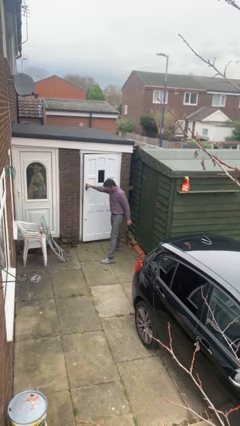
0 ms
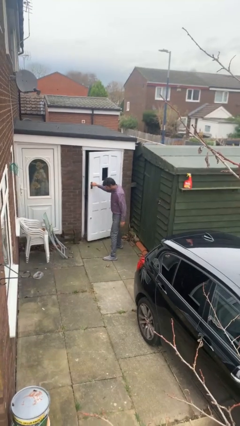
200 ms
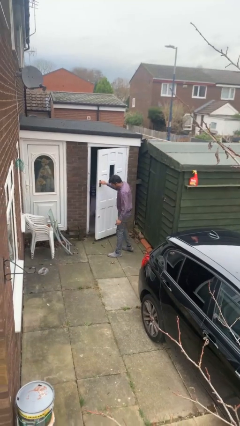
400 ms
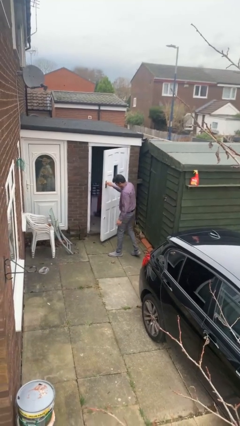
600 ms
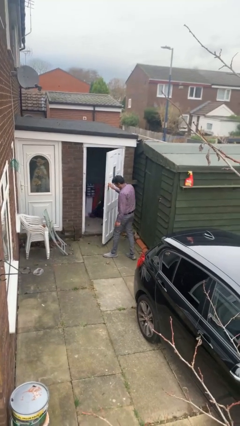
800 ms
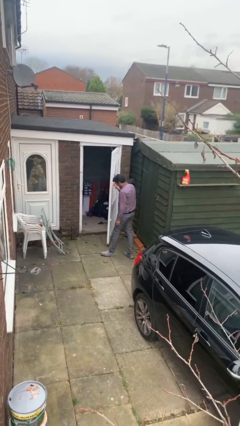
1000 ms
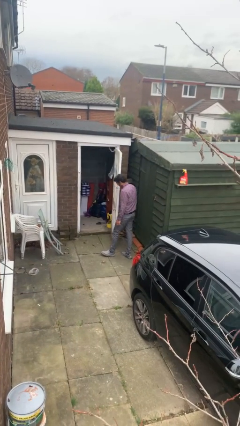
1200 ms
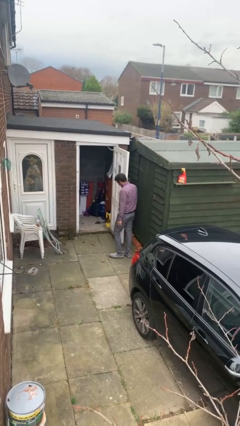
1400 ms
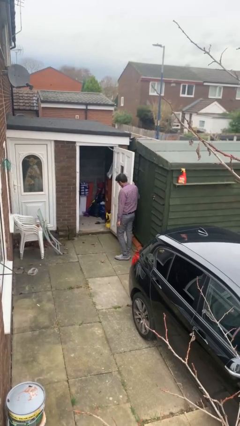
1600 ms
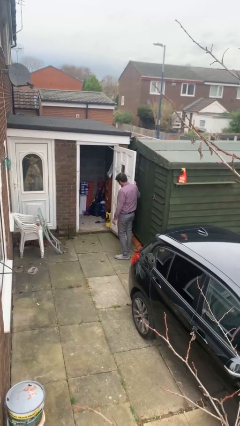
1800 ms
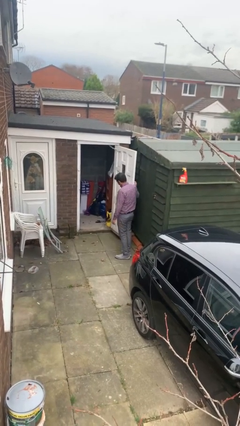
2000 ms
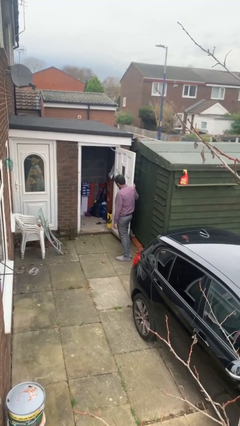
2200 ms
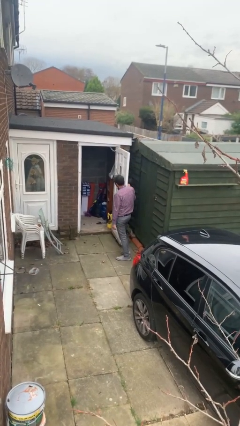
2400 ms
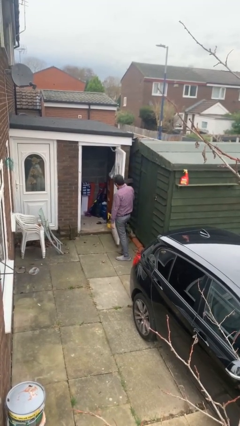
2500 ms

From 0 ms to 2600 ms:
person opens facility door

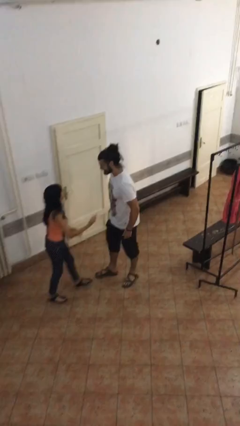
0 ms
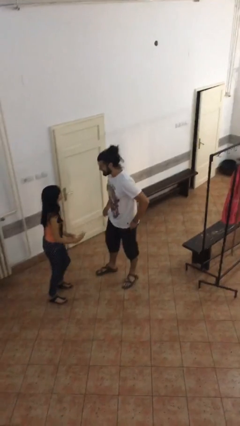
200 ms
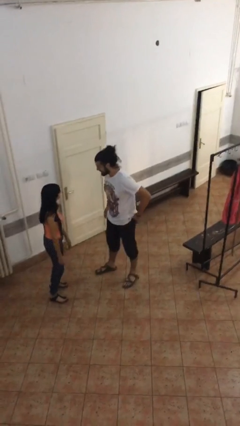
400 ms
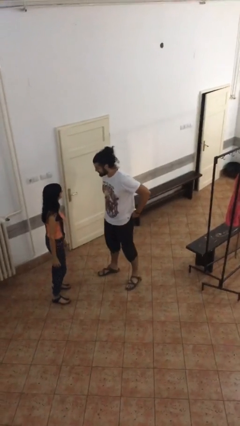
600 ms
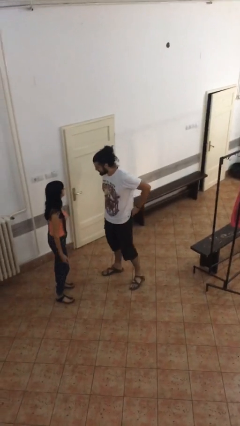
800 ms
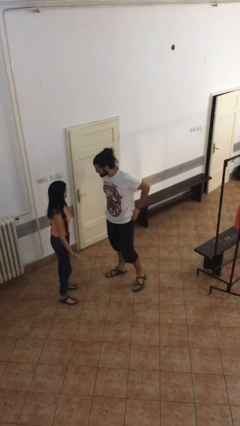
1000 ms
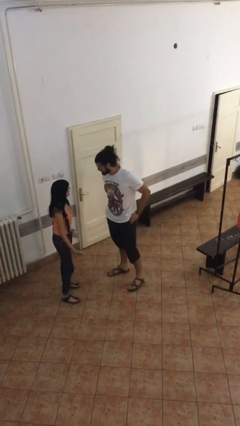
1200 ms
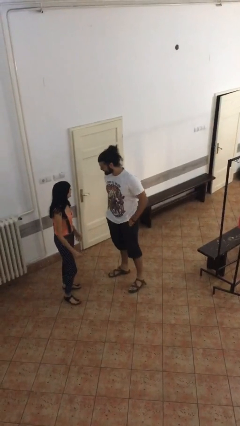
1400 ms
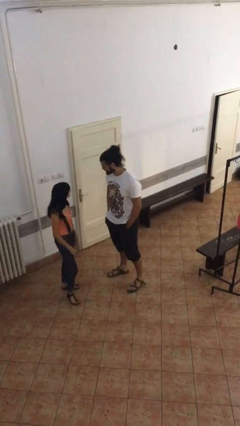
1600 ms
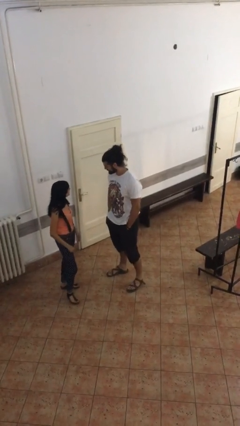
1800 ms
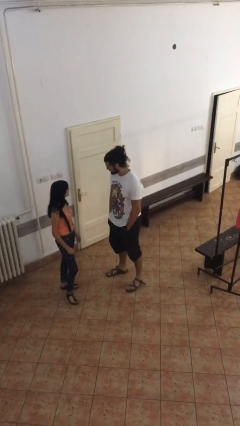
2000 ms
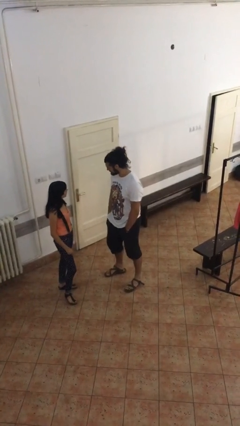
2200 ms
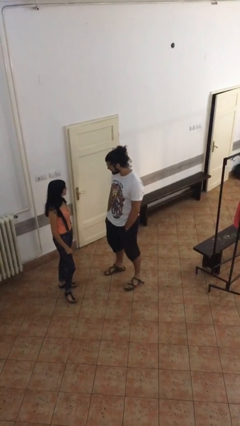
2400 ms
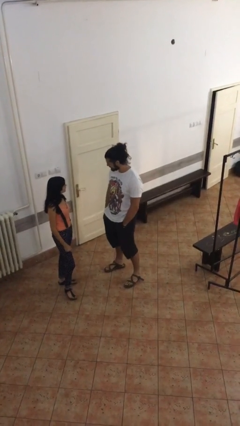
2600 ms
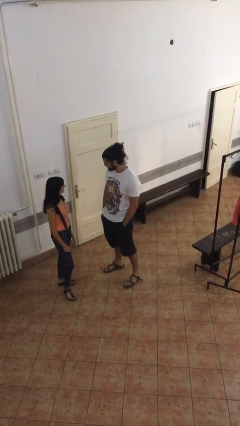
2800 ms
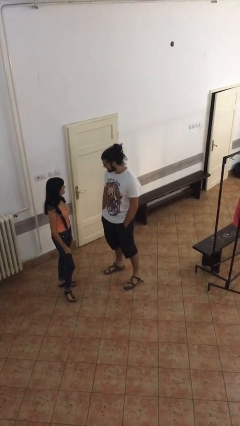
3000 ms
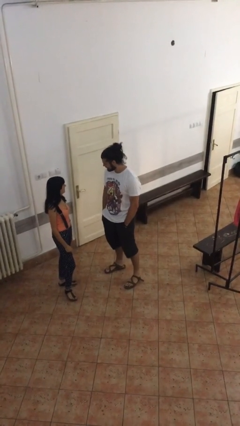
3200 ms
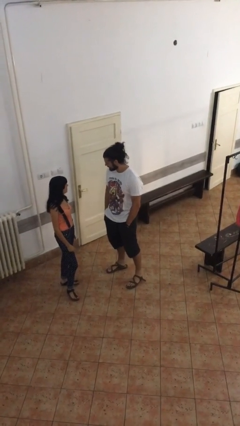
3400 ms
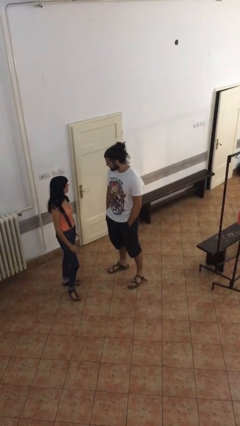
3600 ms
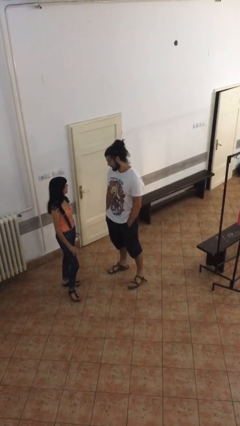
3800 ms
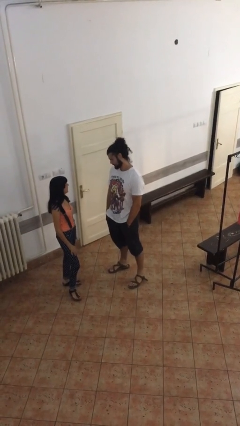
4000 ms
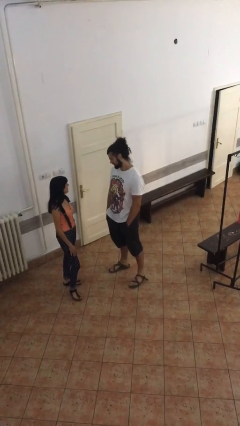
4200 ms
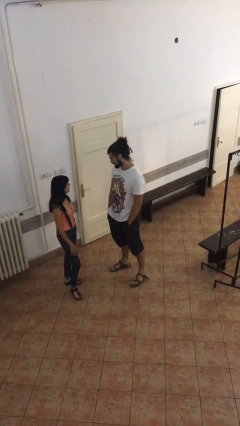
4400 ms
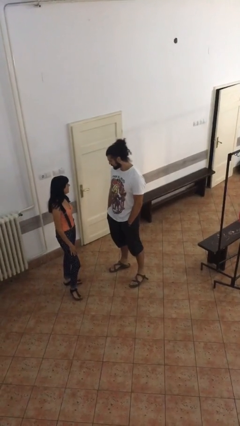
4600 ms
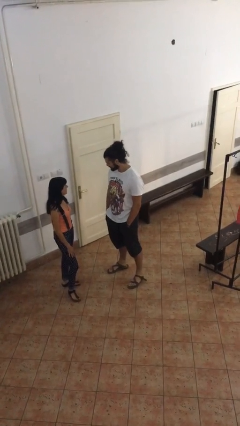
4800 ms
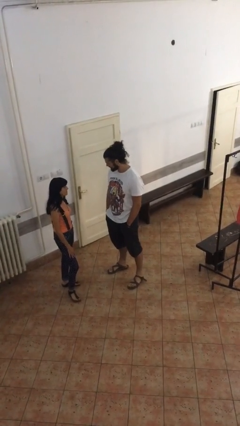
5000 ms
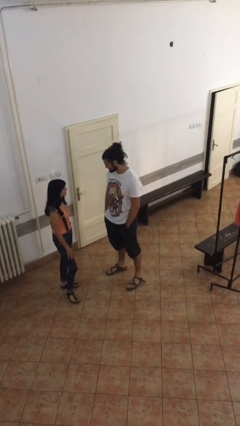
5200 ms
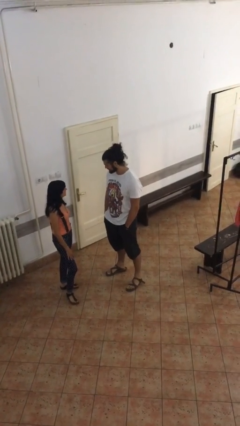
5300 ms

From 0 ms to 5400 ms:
person talks to person

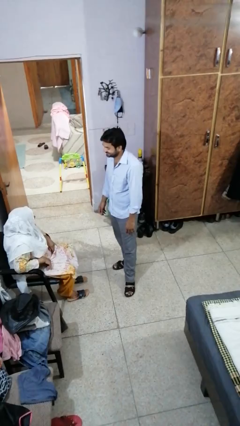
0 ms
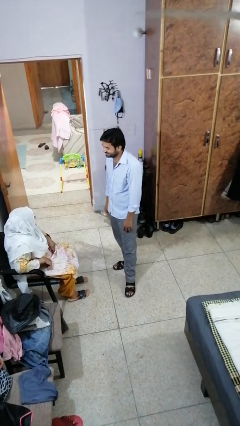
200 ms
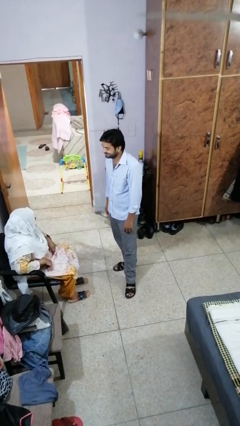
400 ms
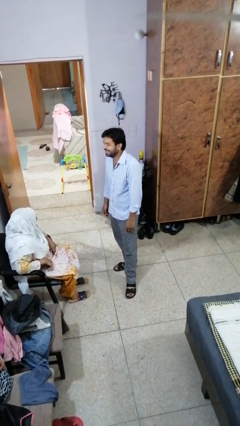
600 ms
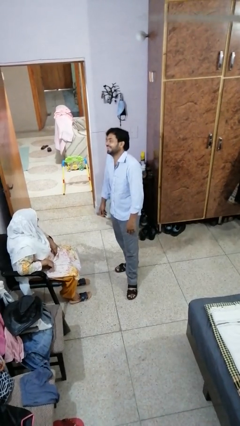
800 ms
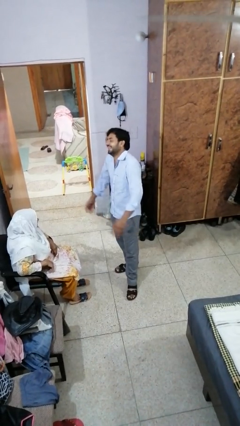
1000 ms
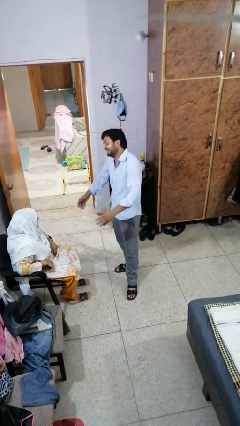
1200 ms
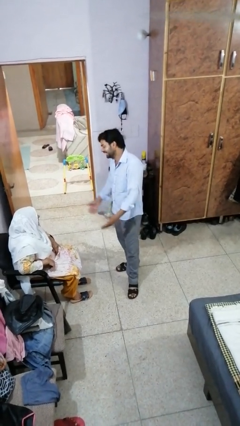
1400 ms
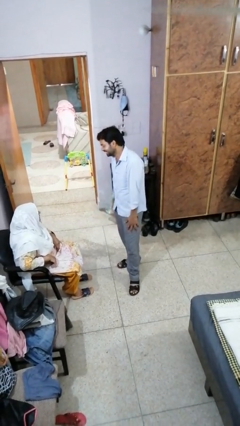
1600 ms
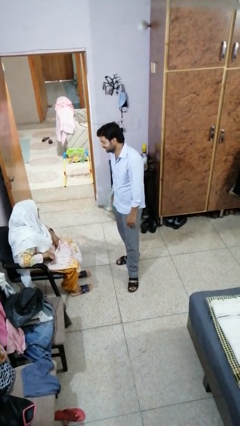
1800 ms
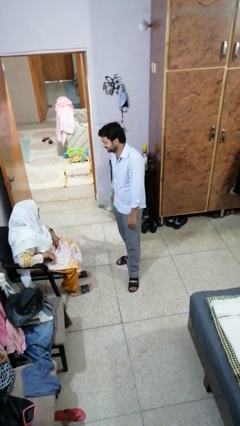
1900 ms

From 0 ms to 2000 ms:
person laughs with person

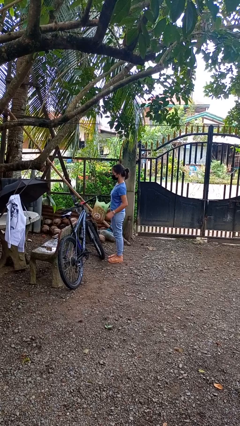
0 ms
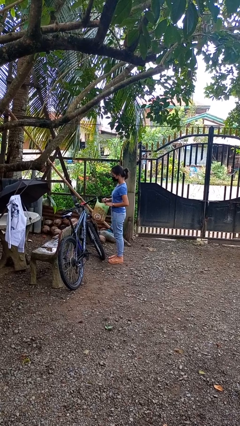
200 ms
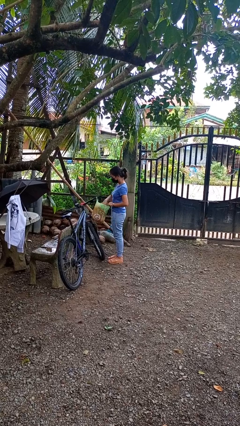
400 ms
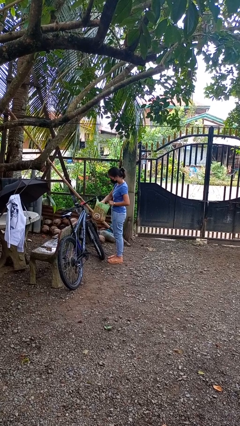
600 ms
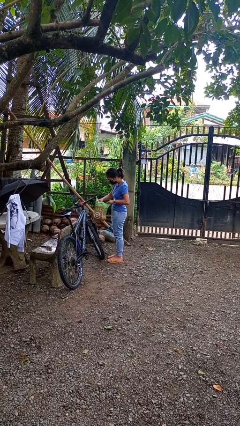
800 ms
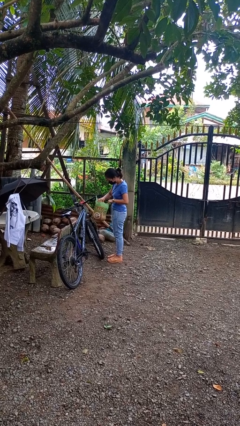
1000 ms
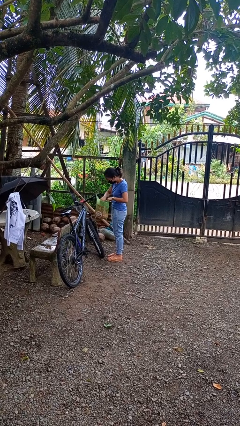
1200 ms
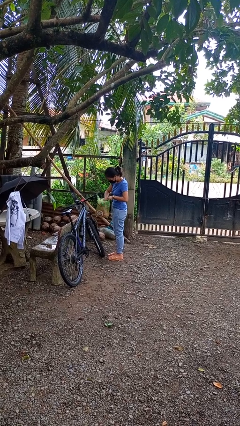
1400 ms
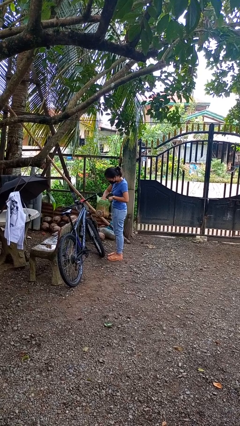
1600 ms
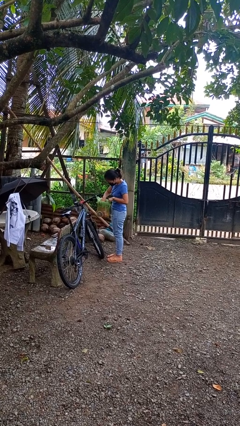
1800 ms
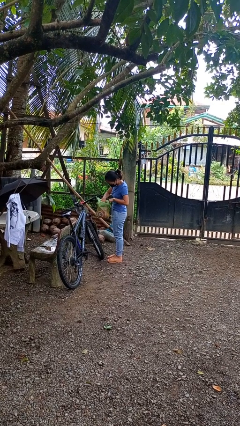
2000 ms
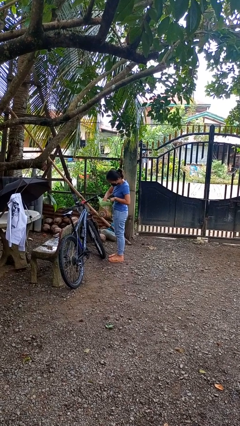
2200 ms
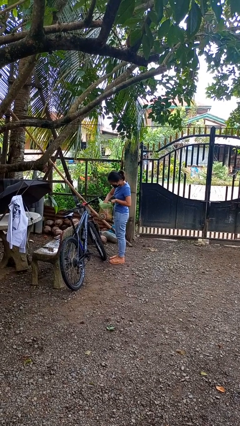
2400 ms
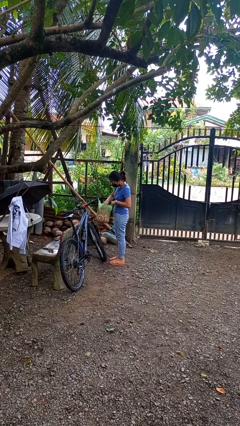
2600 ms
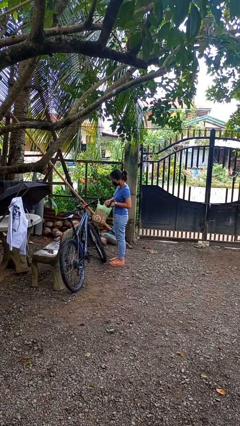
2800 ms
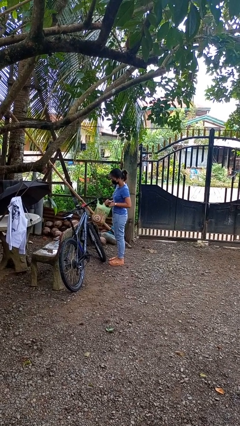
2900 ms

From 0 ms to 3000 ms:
person searches in bag

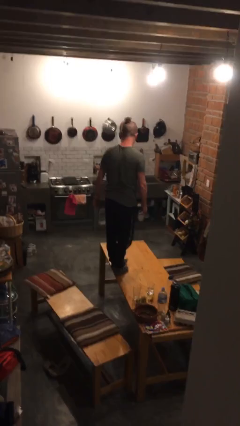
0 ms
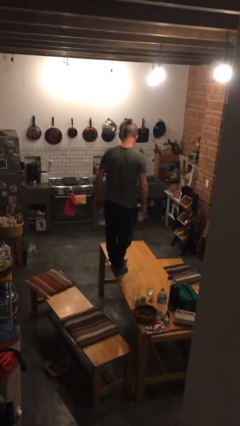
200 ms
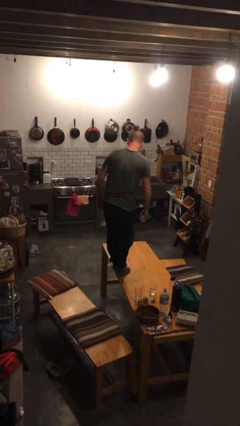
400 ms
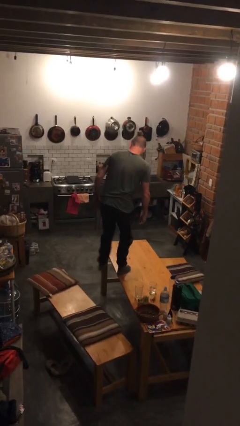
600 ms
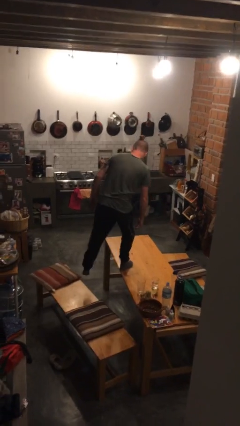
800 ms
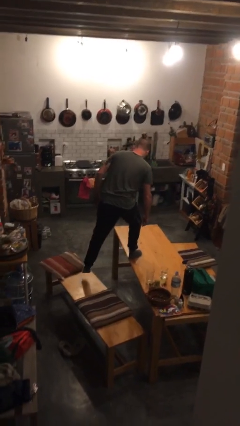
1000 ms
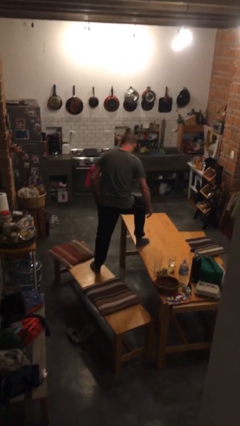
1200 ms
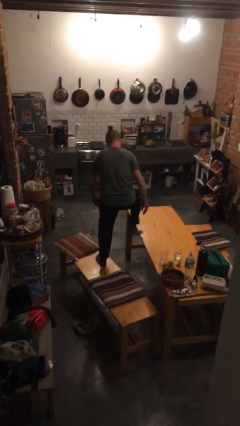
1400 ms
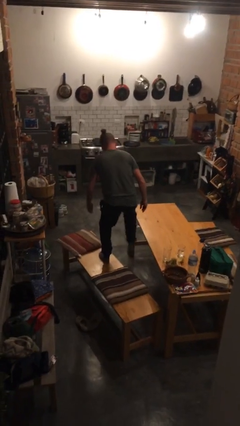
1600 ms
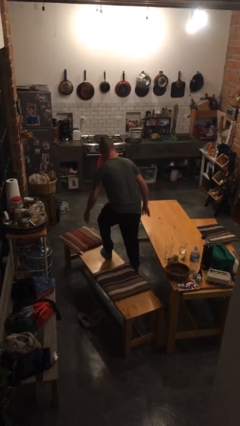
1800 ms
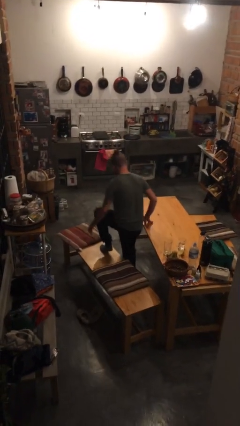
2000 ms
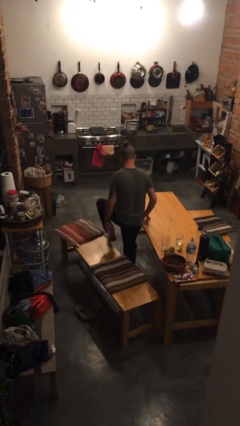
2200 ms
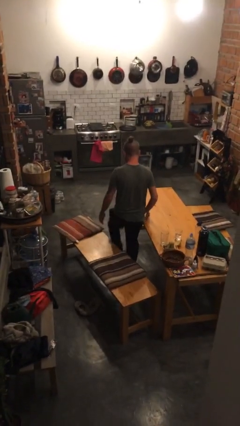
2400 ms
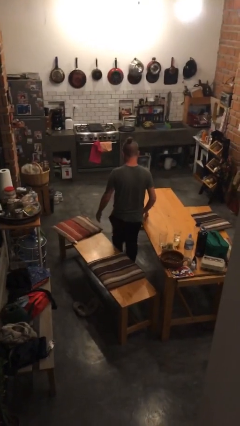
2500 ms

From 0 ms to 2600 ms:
person climbs off table

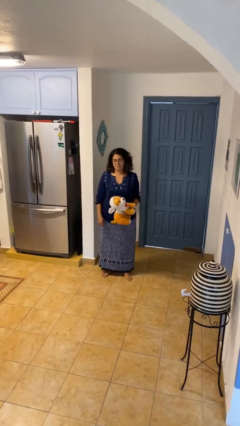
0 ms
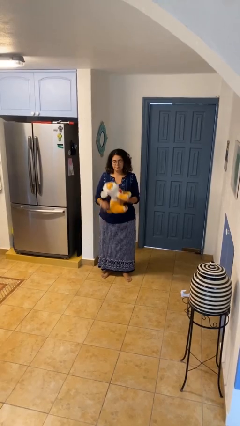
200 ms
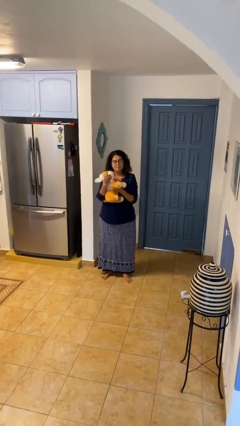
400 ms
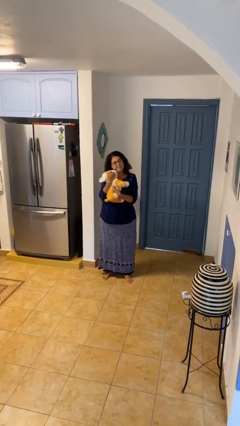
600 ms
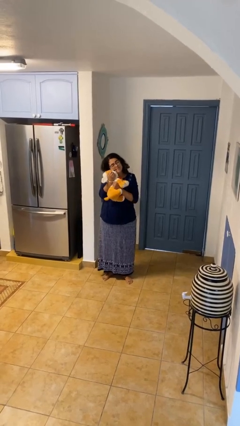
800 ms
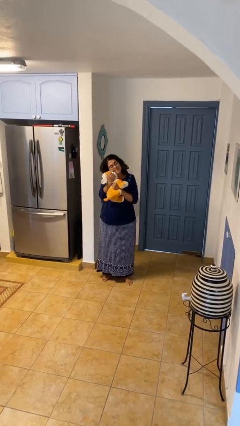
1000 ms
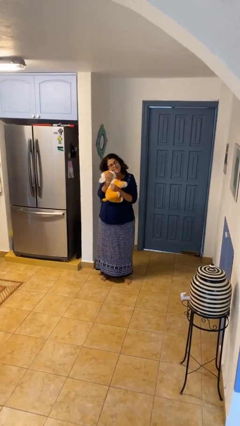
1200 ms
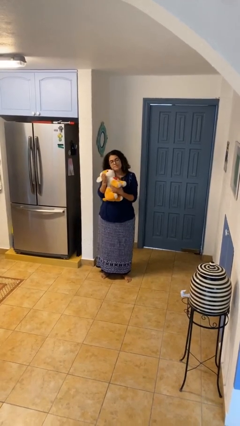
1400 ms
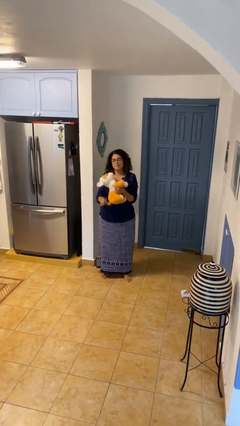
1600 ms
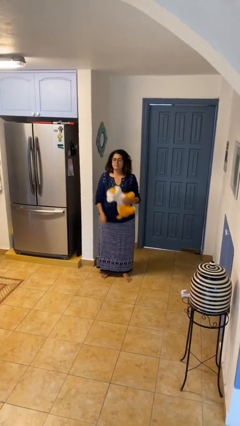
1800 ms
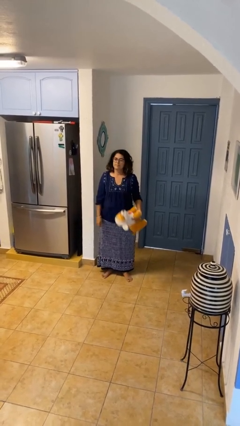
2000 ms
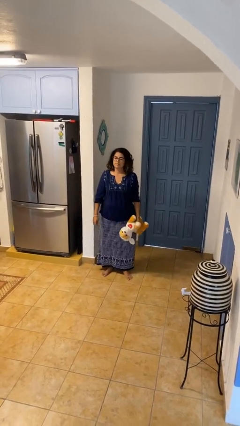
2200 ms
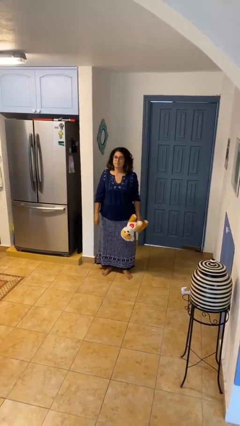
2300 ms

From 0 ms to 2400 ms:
person hugs stuffed animal
